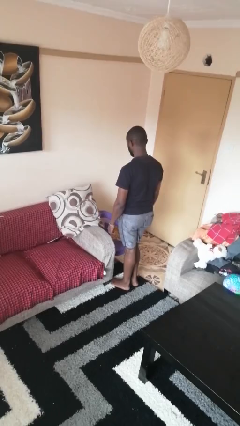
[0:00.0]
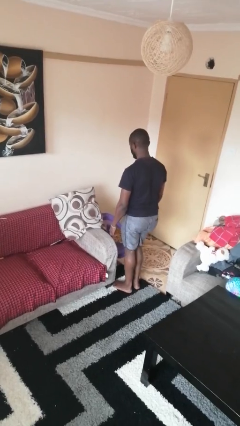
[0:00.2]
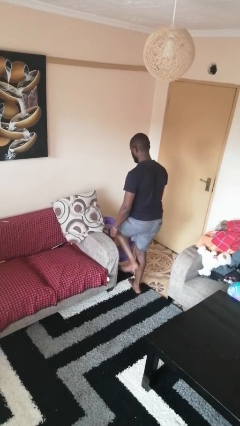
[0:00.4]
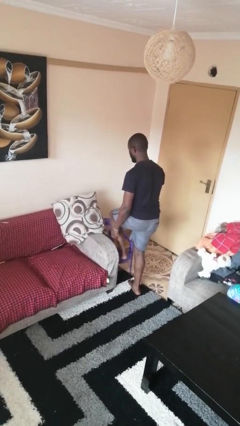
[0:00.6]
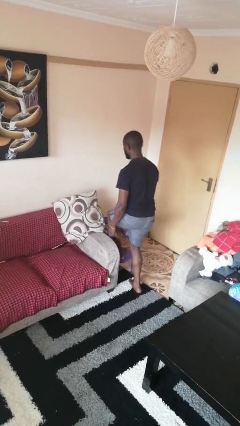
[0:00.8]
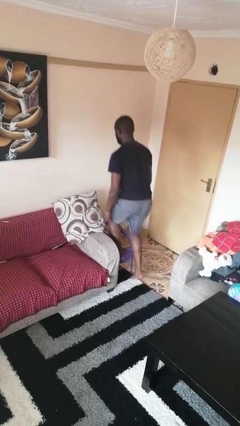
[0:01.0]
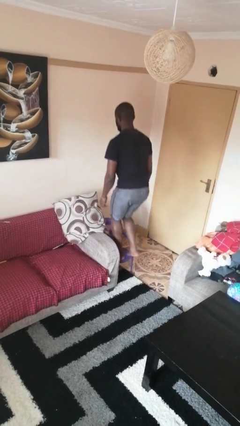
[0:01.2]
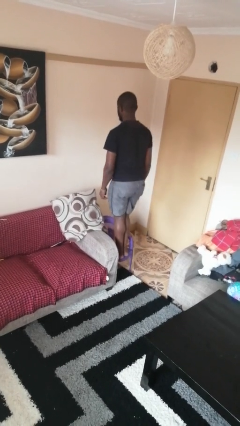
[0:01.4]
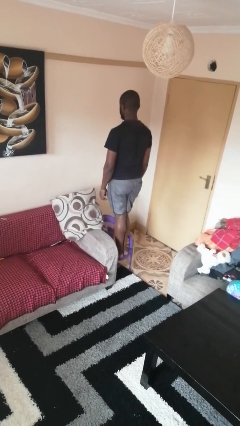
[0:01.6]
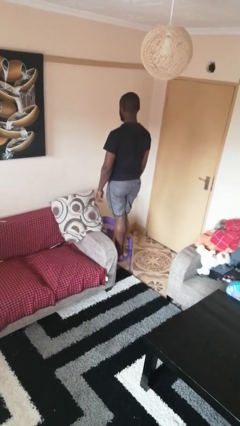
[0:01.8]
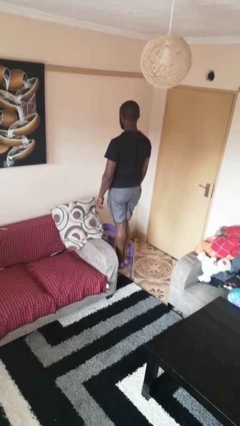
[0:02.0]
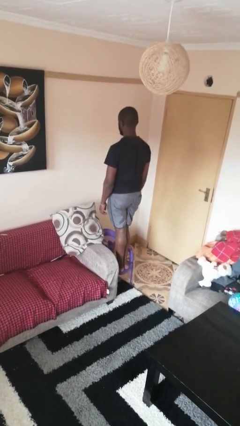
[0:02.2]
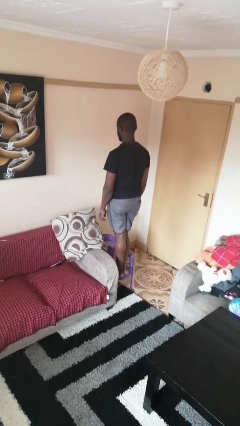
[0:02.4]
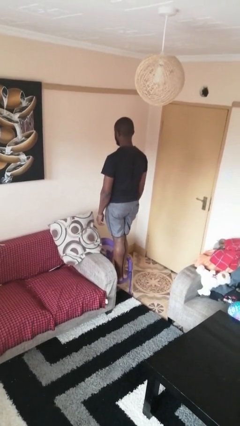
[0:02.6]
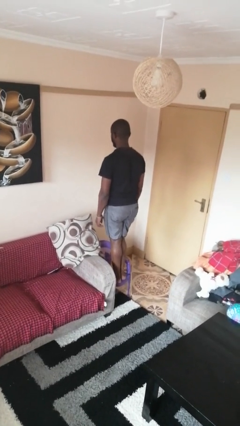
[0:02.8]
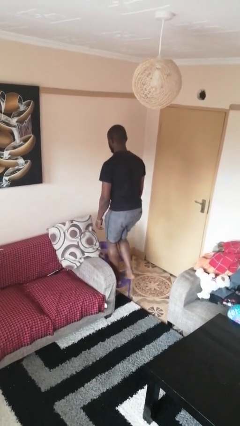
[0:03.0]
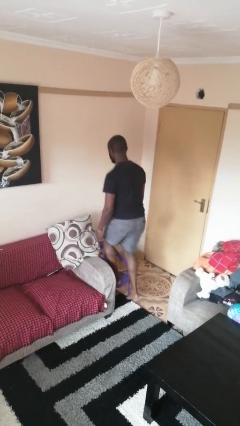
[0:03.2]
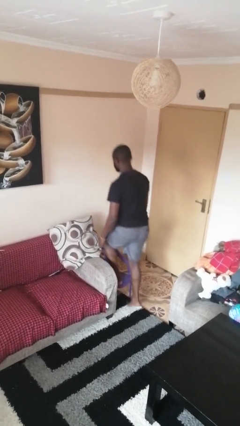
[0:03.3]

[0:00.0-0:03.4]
person climbs on chair

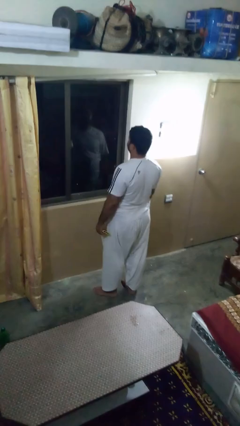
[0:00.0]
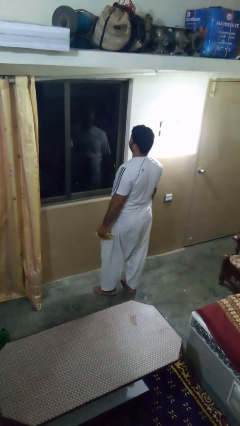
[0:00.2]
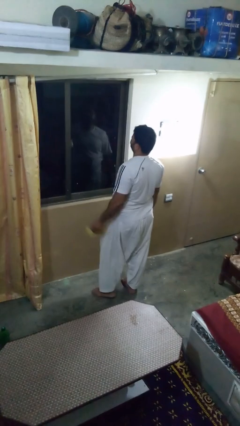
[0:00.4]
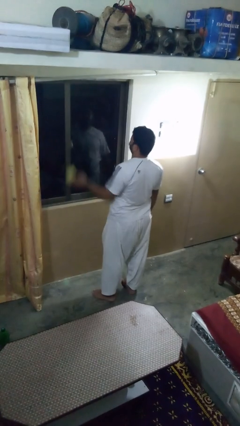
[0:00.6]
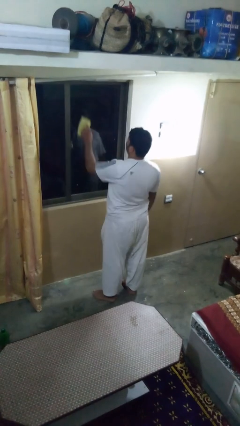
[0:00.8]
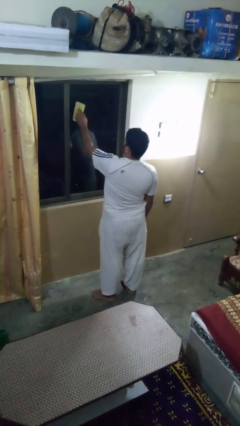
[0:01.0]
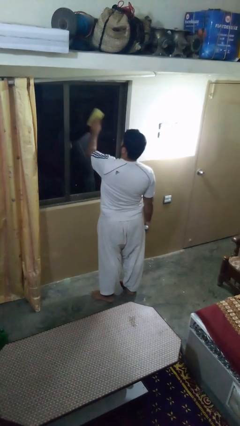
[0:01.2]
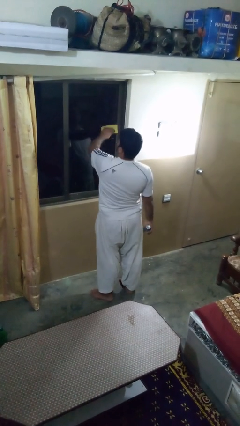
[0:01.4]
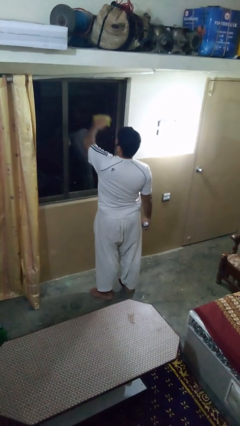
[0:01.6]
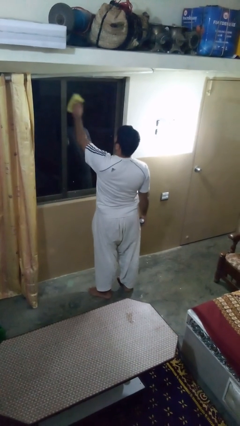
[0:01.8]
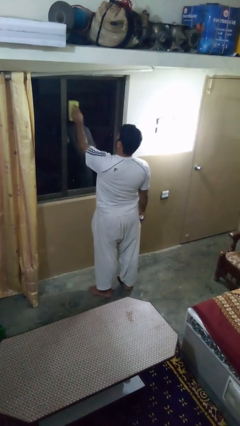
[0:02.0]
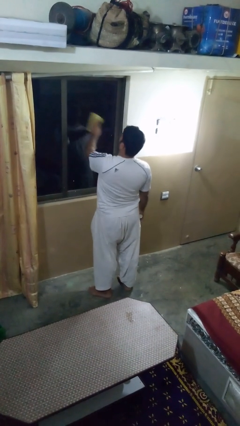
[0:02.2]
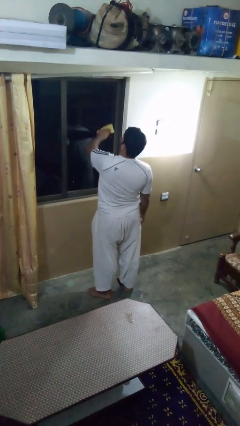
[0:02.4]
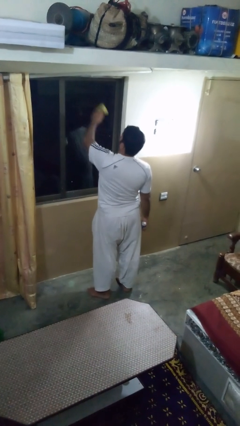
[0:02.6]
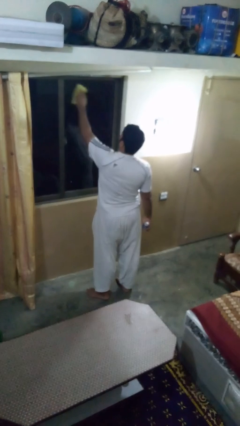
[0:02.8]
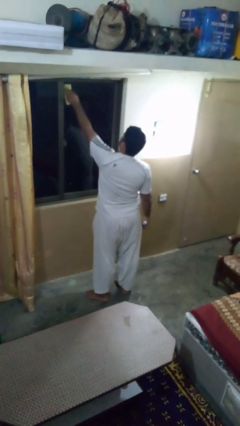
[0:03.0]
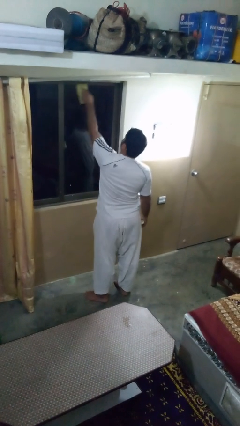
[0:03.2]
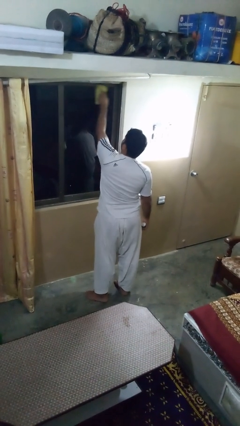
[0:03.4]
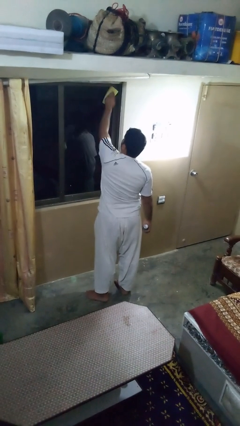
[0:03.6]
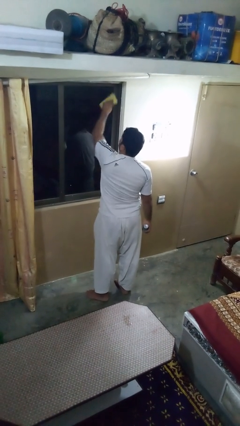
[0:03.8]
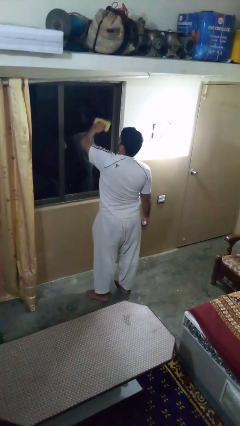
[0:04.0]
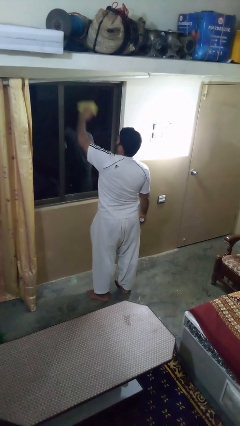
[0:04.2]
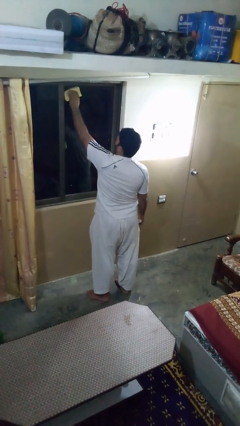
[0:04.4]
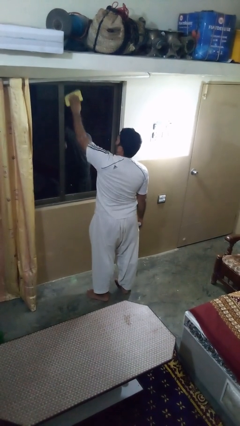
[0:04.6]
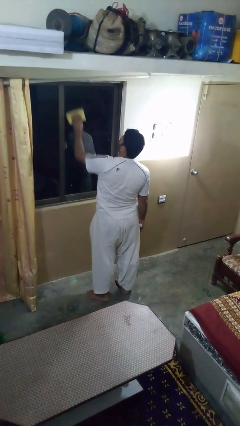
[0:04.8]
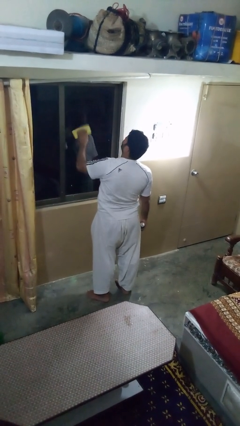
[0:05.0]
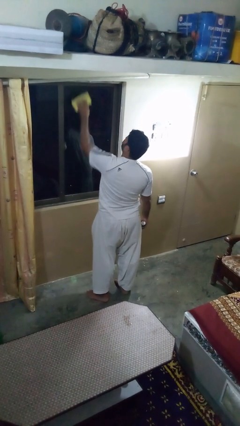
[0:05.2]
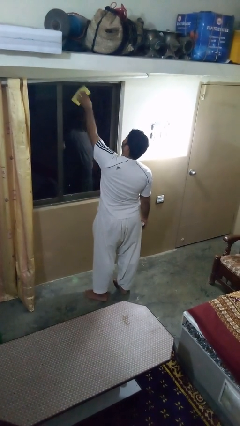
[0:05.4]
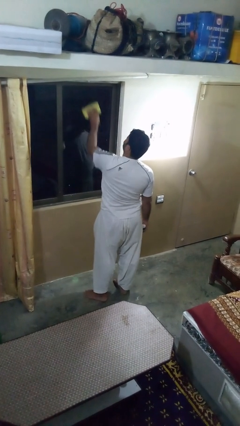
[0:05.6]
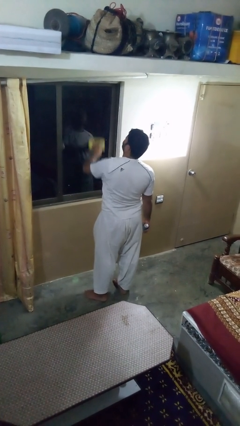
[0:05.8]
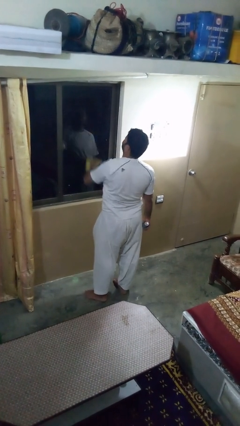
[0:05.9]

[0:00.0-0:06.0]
person washes window

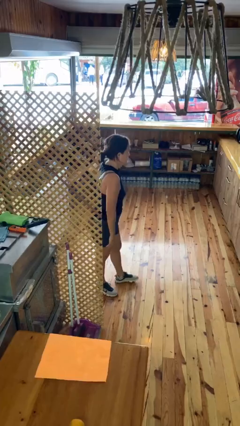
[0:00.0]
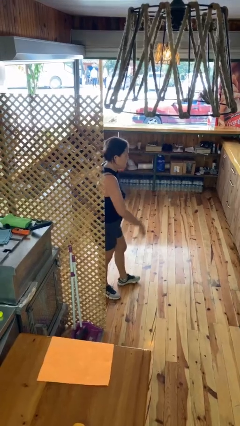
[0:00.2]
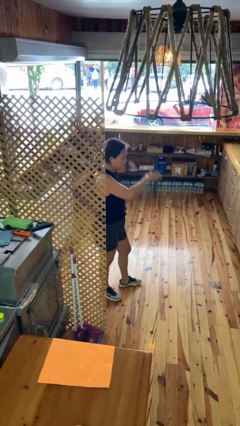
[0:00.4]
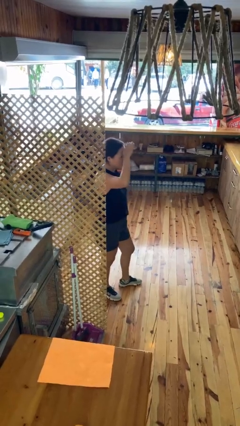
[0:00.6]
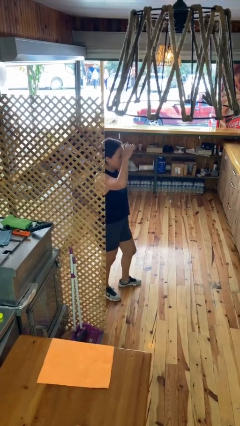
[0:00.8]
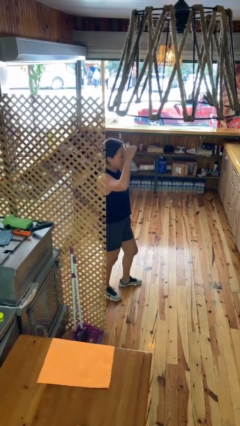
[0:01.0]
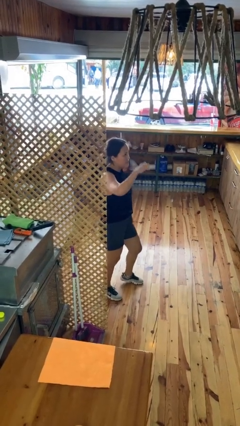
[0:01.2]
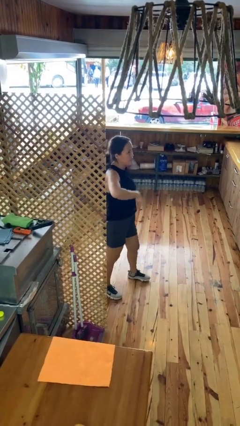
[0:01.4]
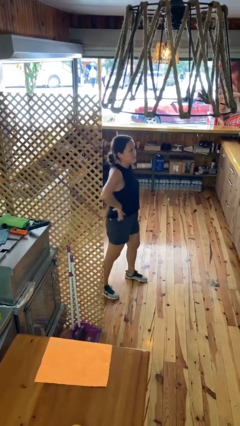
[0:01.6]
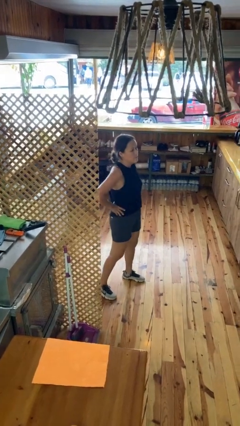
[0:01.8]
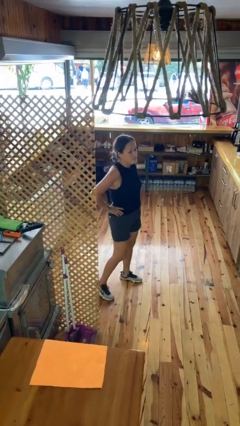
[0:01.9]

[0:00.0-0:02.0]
person salutes

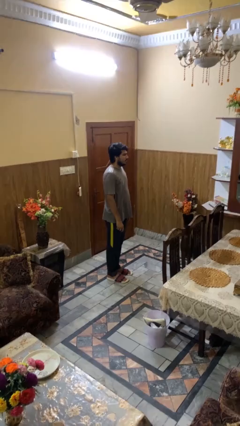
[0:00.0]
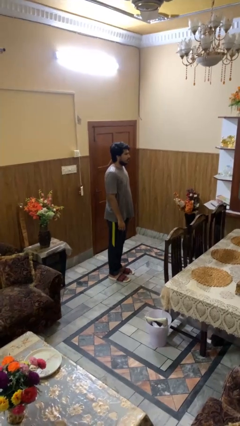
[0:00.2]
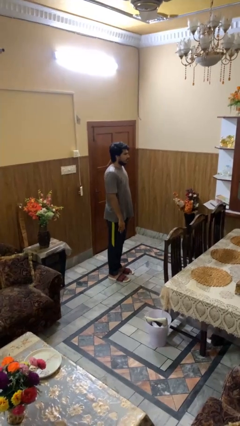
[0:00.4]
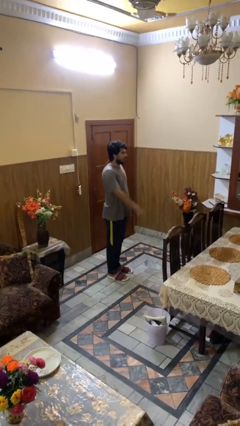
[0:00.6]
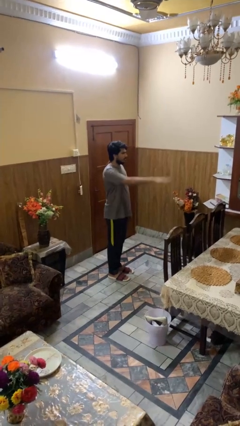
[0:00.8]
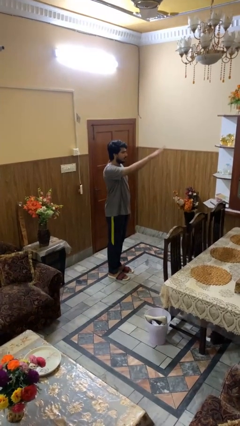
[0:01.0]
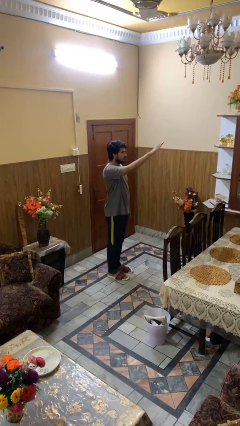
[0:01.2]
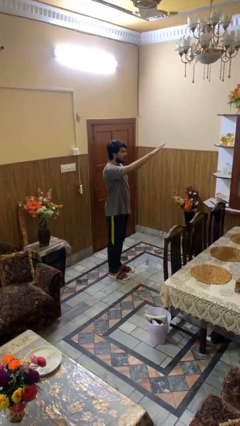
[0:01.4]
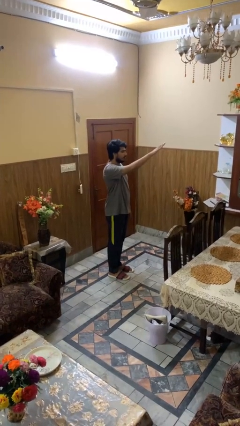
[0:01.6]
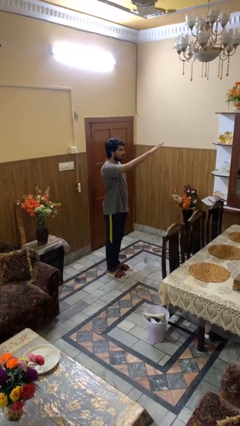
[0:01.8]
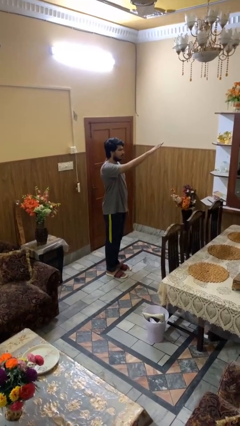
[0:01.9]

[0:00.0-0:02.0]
person gestures swipe up

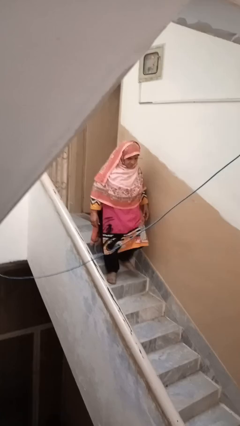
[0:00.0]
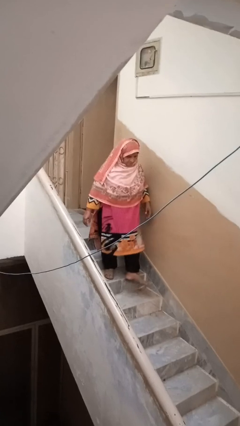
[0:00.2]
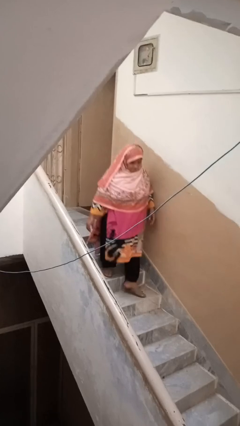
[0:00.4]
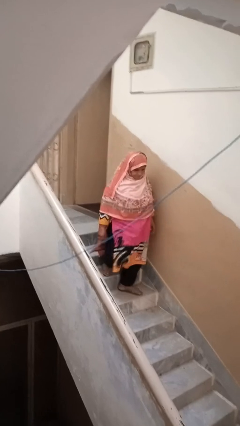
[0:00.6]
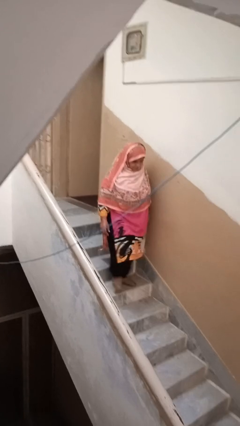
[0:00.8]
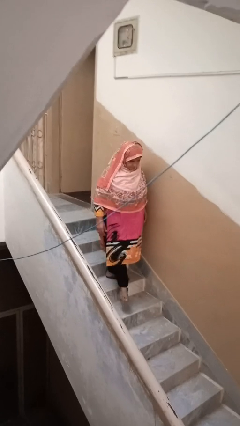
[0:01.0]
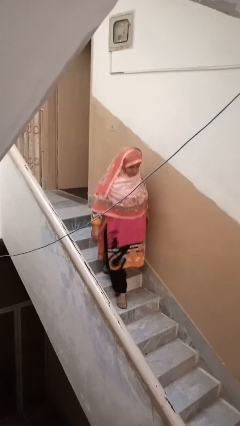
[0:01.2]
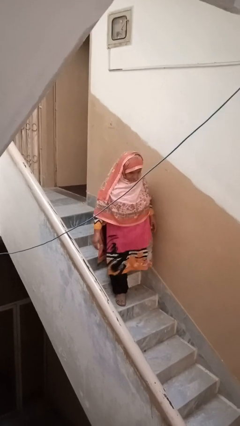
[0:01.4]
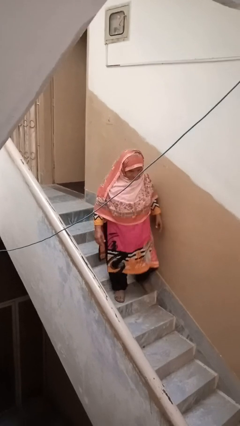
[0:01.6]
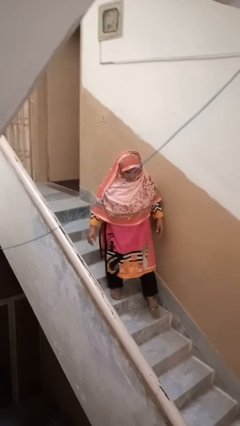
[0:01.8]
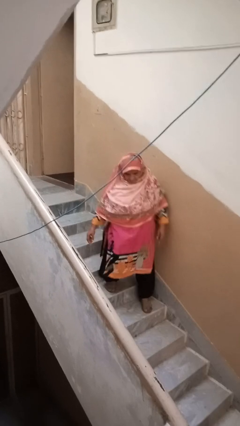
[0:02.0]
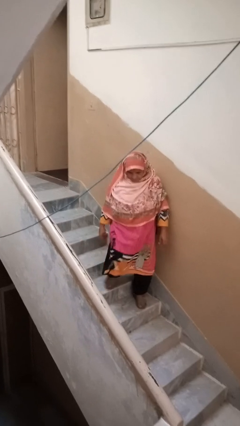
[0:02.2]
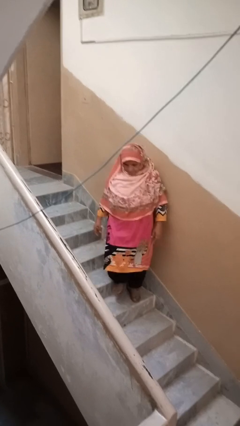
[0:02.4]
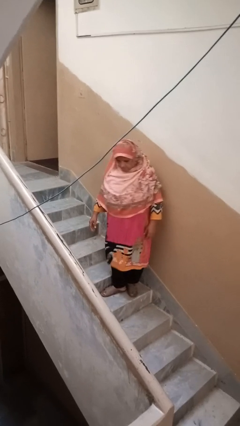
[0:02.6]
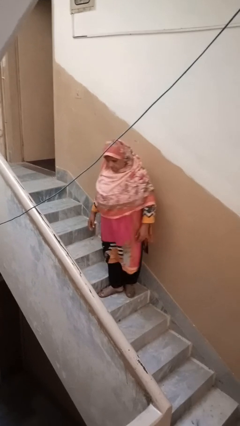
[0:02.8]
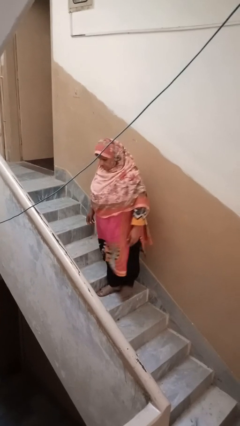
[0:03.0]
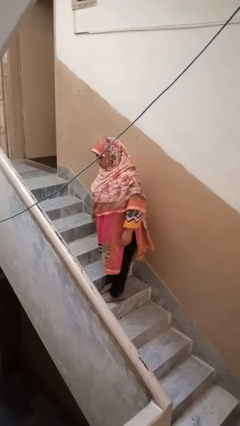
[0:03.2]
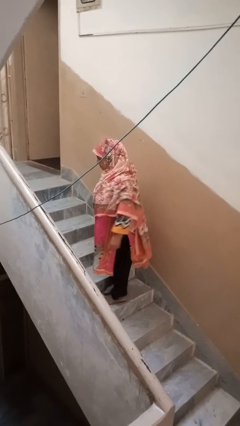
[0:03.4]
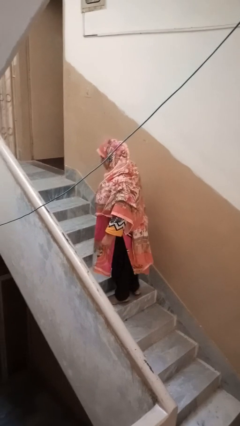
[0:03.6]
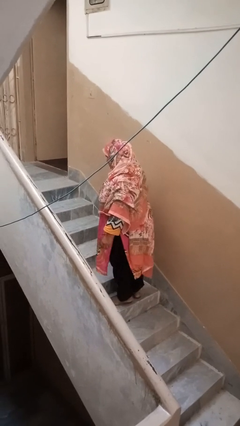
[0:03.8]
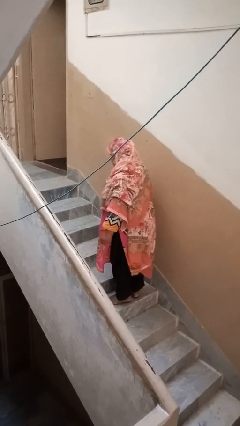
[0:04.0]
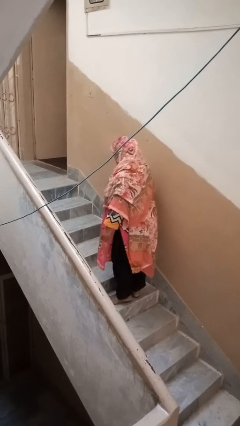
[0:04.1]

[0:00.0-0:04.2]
person climbs down stairs
